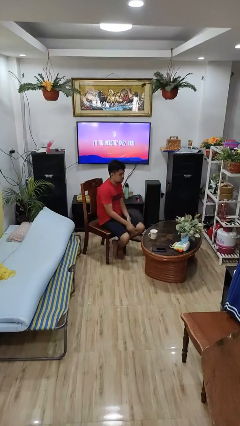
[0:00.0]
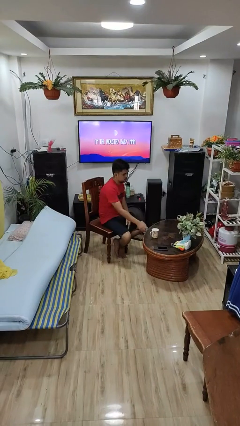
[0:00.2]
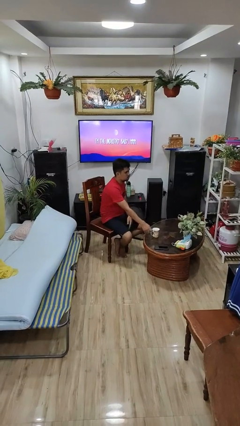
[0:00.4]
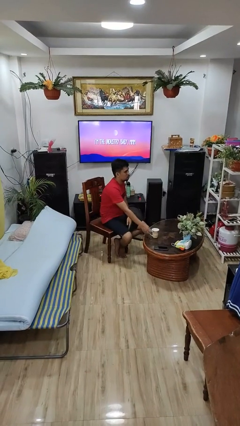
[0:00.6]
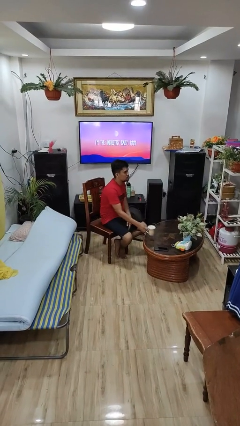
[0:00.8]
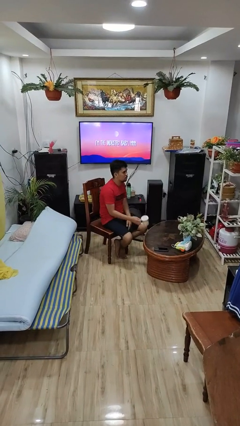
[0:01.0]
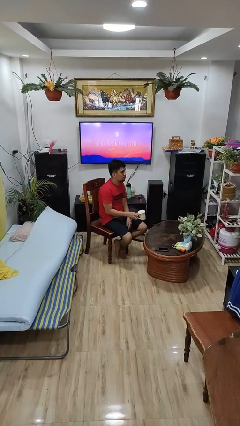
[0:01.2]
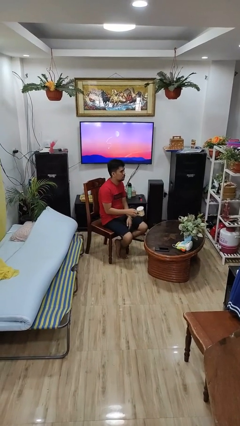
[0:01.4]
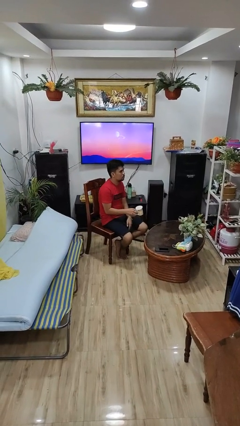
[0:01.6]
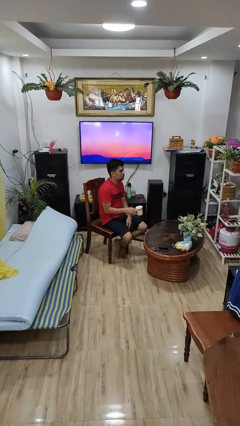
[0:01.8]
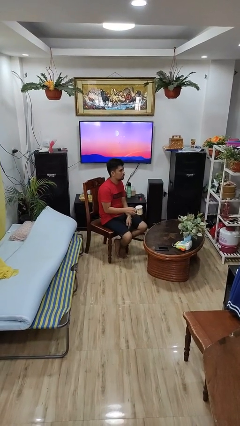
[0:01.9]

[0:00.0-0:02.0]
person picks up object from table

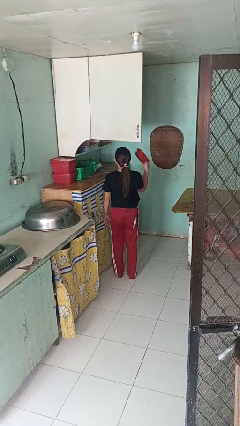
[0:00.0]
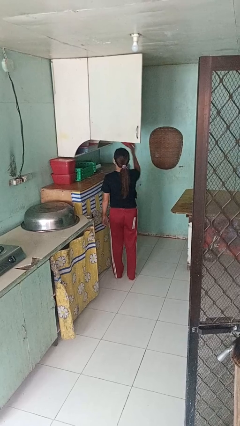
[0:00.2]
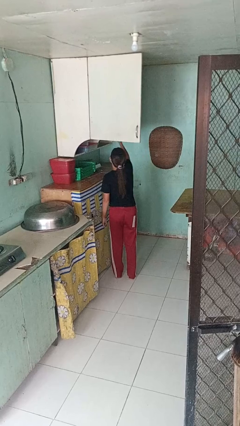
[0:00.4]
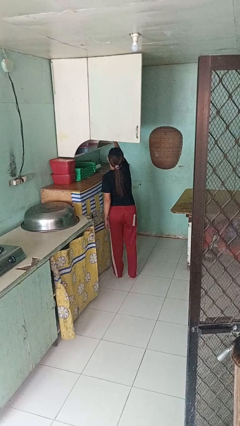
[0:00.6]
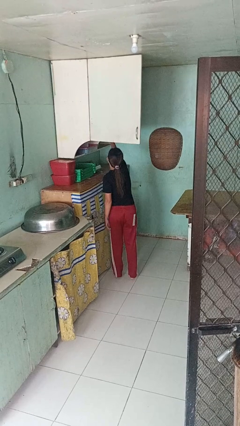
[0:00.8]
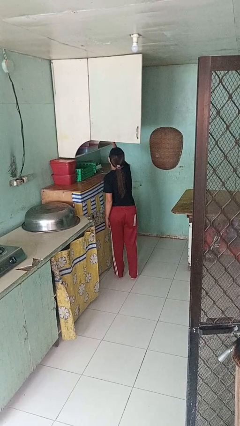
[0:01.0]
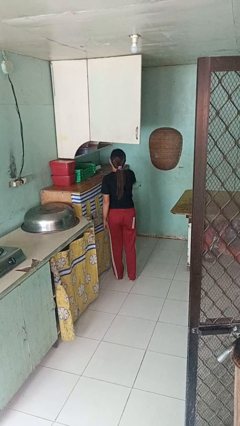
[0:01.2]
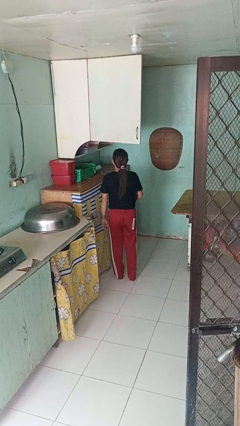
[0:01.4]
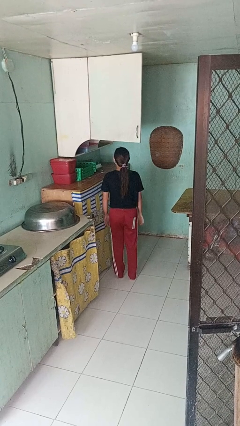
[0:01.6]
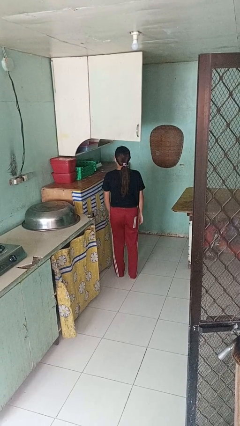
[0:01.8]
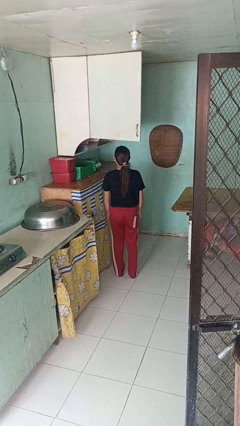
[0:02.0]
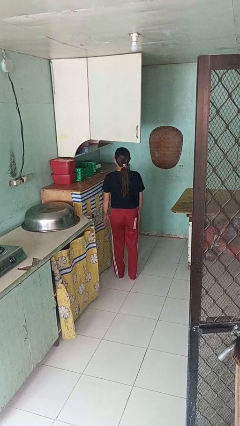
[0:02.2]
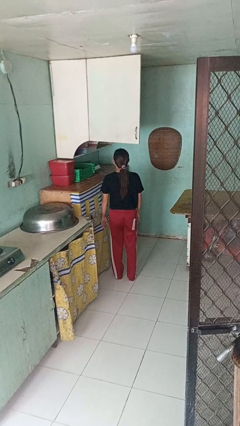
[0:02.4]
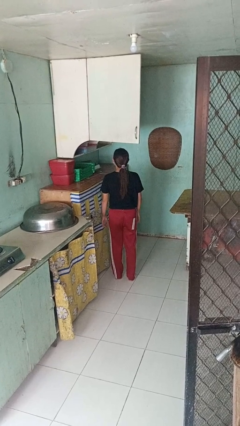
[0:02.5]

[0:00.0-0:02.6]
person puts object in cabinet

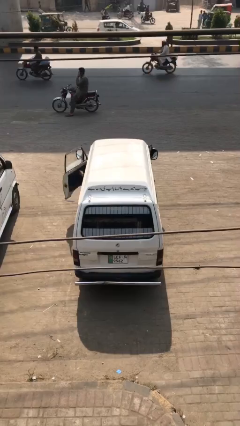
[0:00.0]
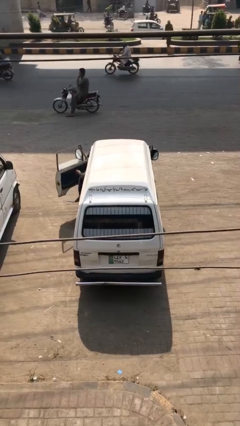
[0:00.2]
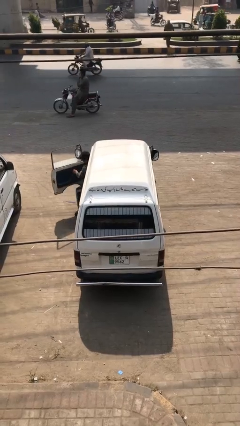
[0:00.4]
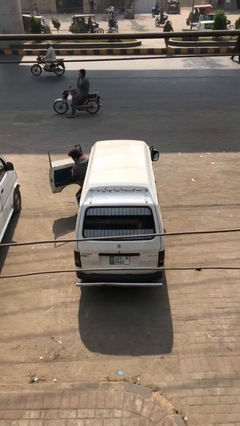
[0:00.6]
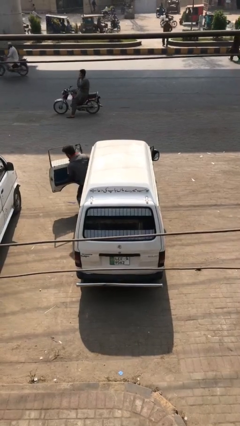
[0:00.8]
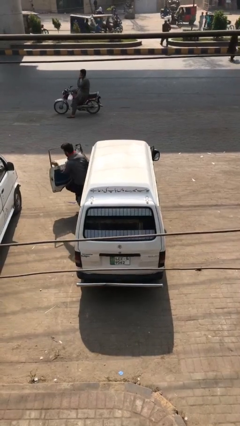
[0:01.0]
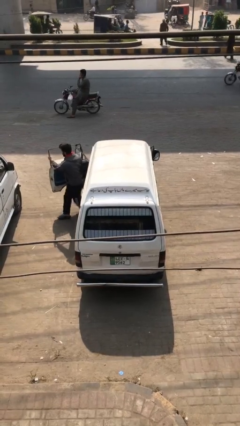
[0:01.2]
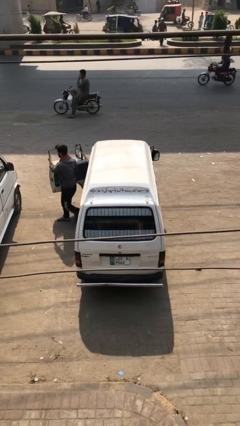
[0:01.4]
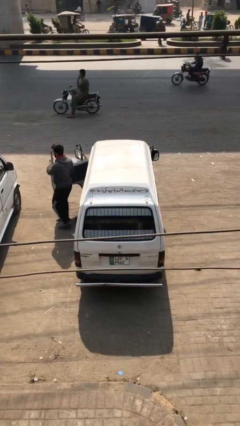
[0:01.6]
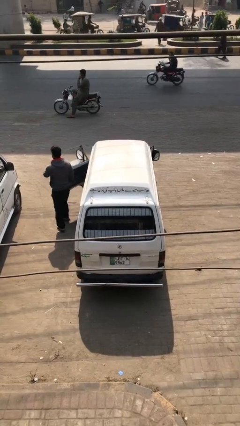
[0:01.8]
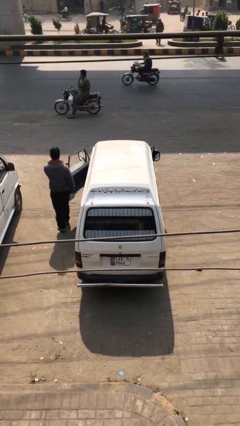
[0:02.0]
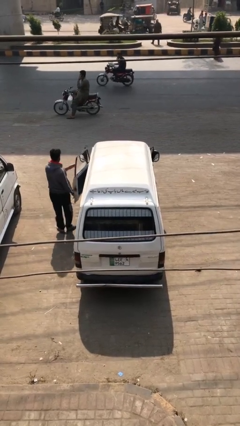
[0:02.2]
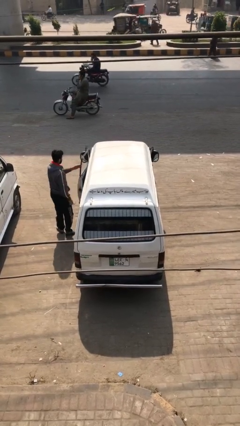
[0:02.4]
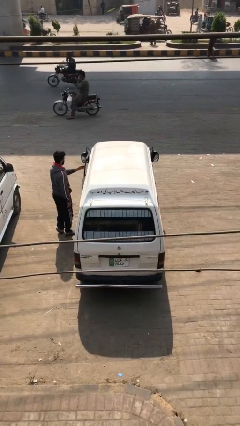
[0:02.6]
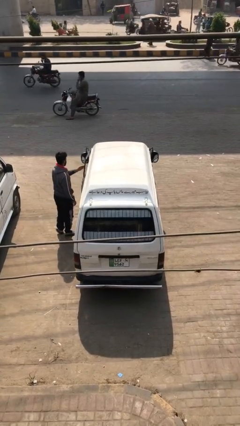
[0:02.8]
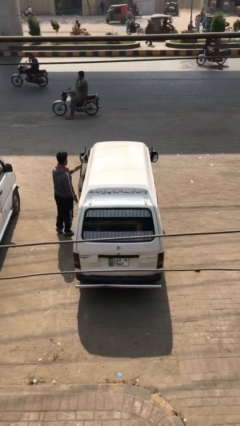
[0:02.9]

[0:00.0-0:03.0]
car drops off person

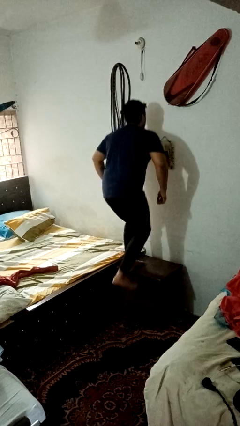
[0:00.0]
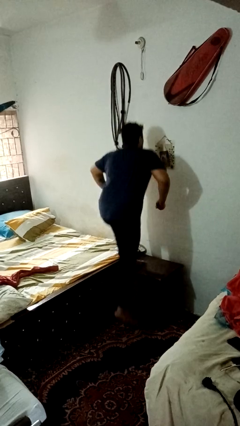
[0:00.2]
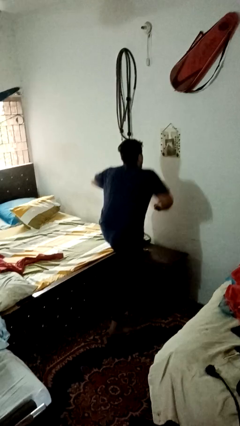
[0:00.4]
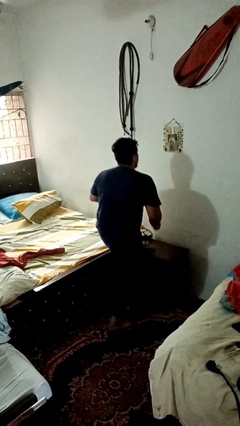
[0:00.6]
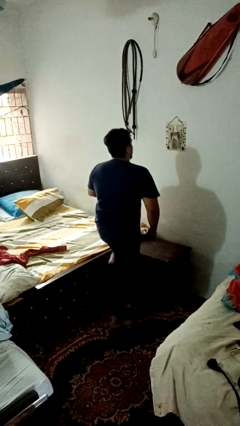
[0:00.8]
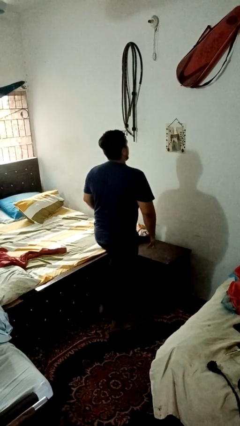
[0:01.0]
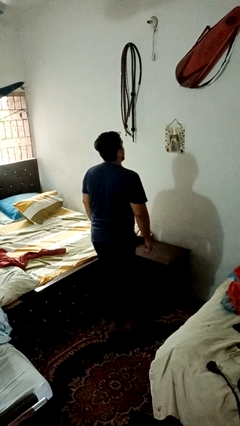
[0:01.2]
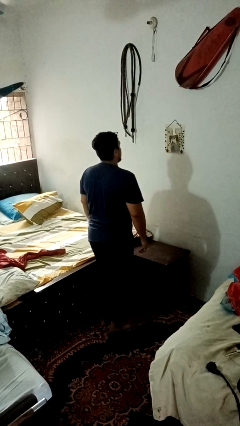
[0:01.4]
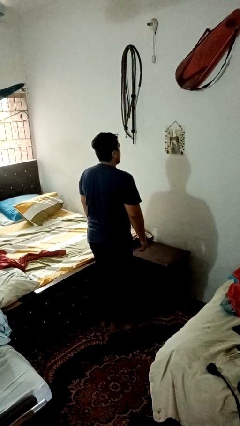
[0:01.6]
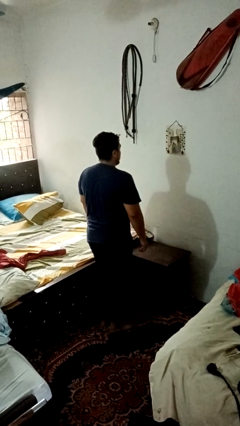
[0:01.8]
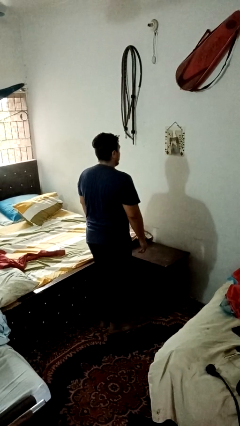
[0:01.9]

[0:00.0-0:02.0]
person climbs off table

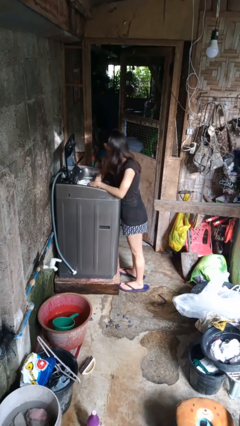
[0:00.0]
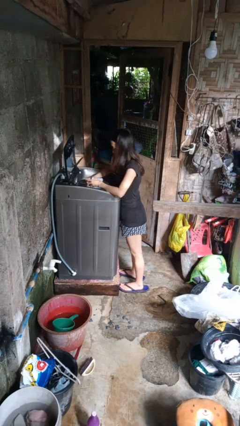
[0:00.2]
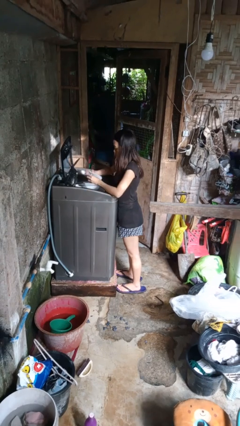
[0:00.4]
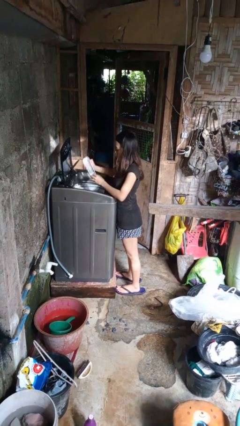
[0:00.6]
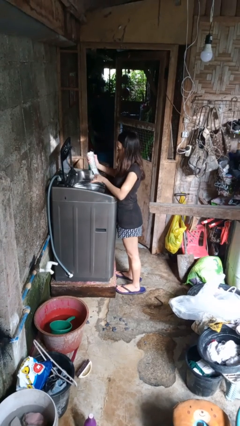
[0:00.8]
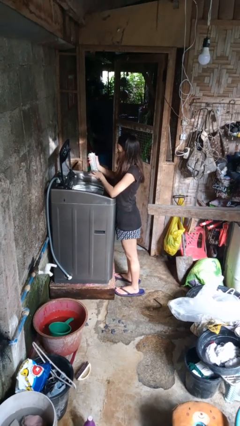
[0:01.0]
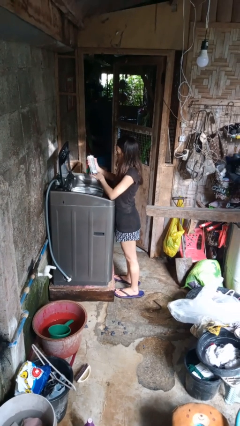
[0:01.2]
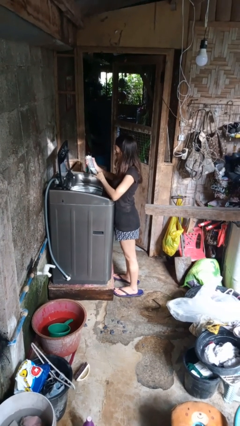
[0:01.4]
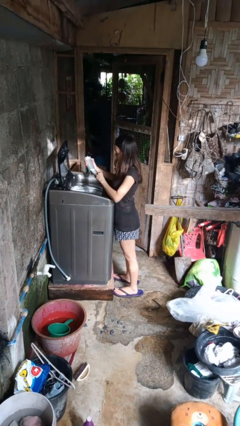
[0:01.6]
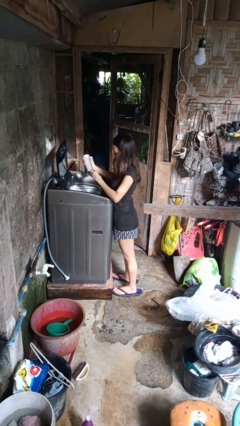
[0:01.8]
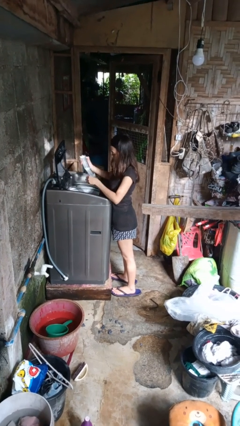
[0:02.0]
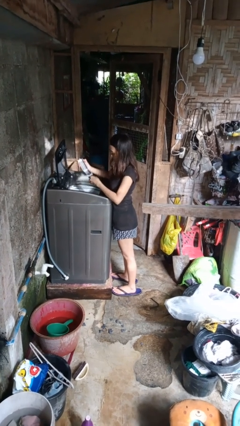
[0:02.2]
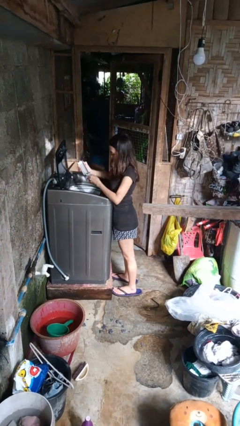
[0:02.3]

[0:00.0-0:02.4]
person cleans dryer lint trap

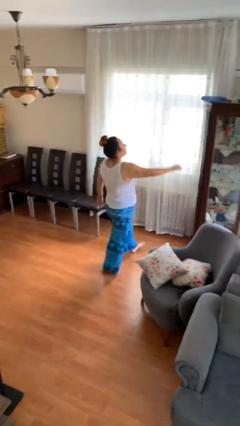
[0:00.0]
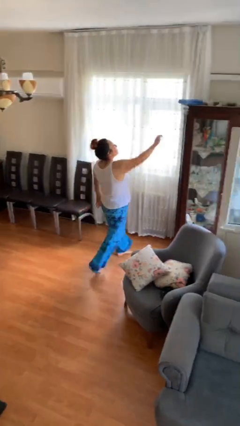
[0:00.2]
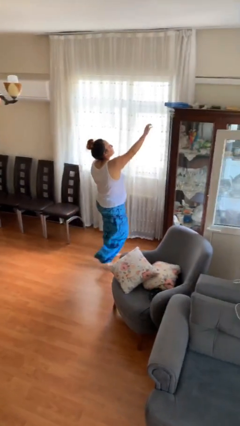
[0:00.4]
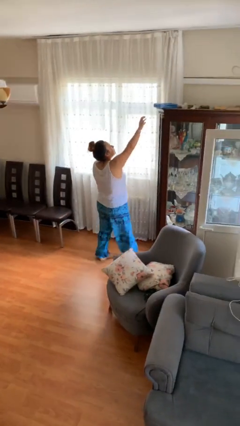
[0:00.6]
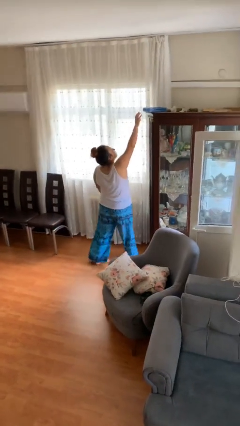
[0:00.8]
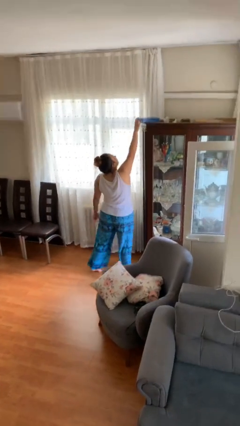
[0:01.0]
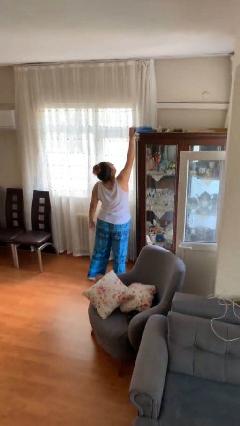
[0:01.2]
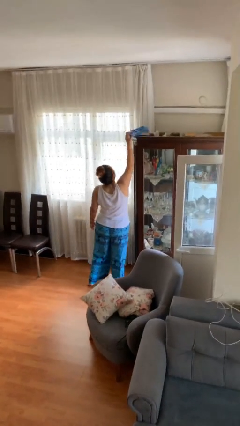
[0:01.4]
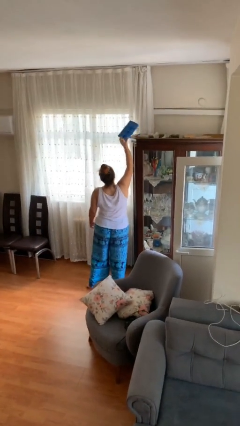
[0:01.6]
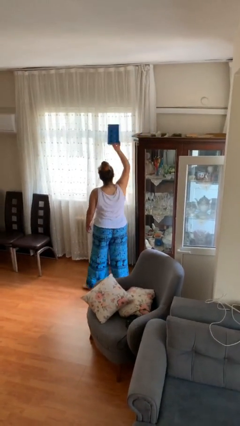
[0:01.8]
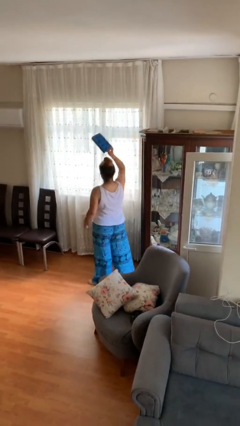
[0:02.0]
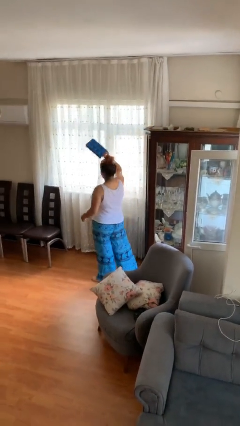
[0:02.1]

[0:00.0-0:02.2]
person picks up object from shelf

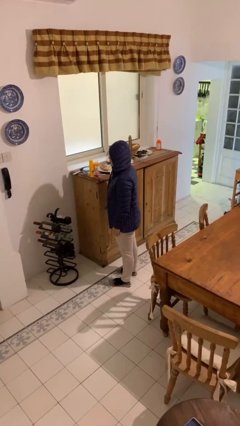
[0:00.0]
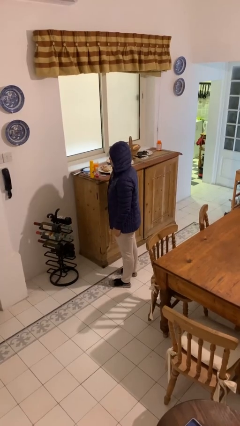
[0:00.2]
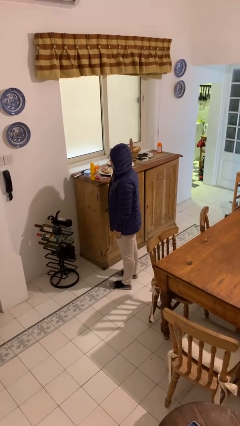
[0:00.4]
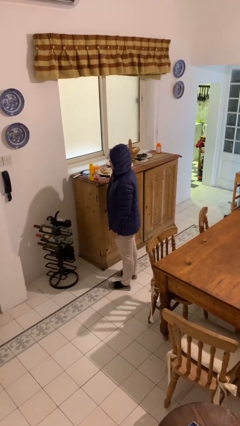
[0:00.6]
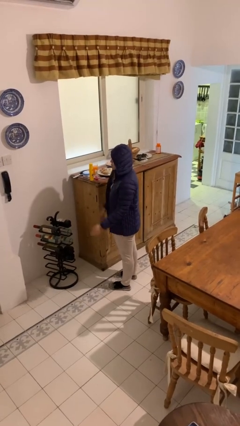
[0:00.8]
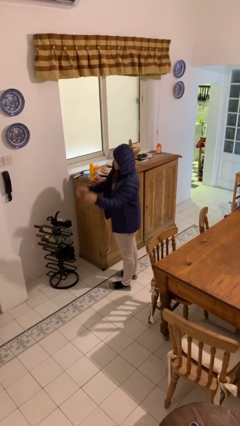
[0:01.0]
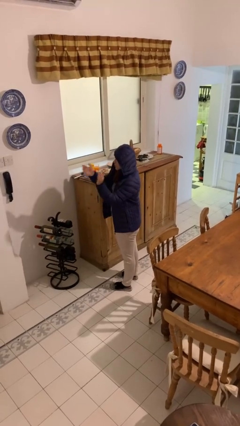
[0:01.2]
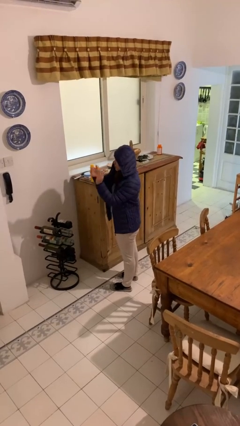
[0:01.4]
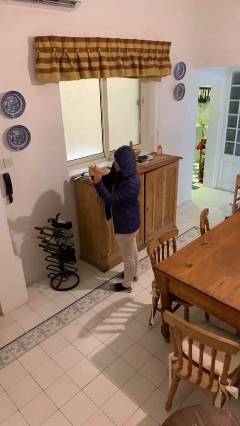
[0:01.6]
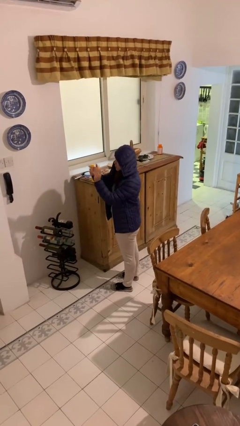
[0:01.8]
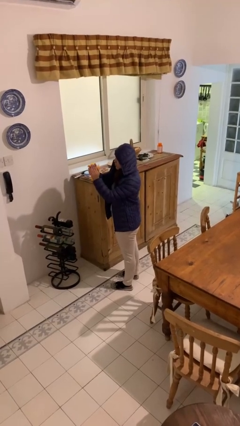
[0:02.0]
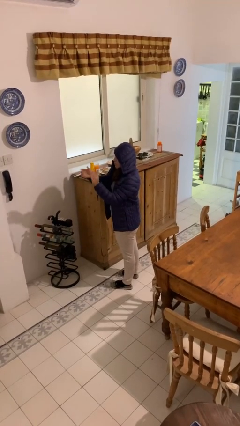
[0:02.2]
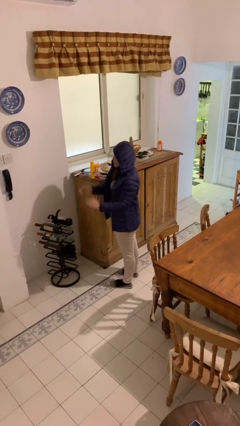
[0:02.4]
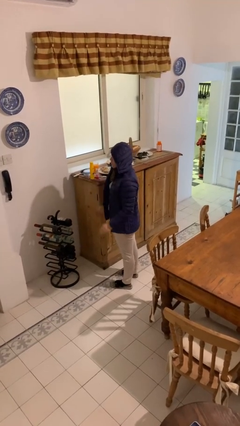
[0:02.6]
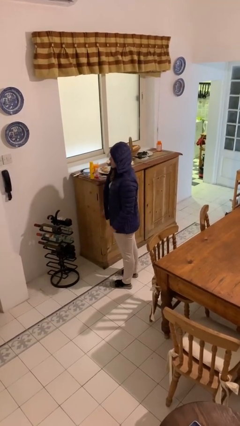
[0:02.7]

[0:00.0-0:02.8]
person claps hands
